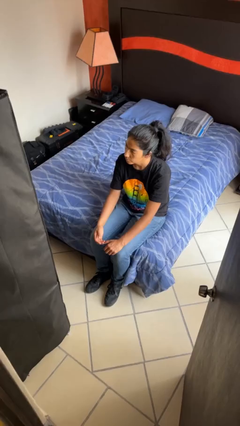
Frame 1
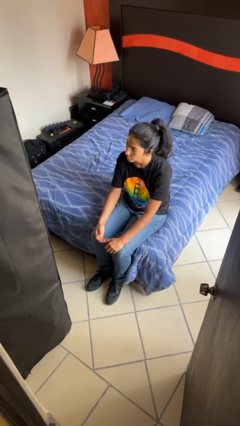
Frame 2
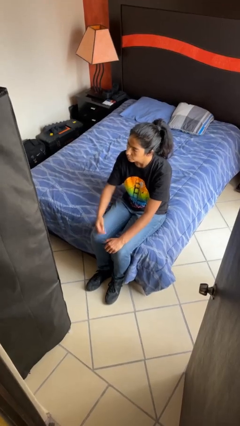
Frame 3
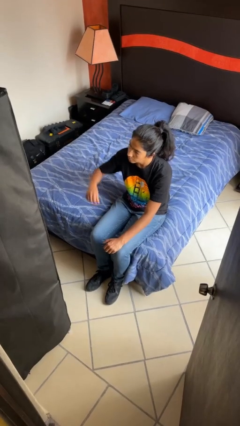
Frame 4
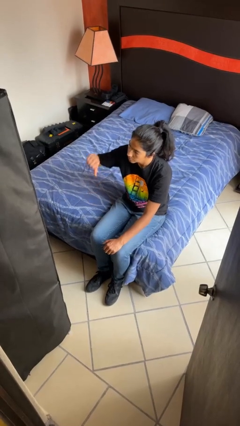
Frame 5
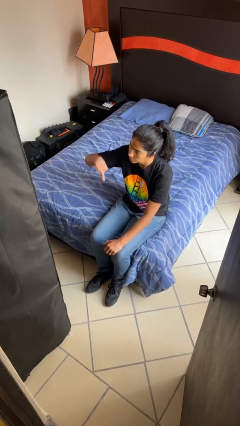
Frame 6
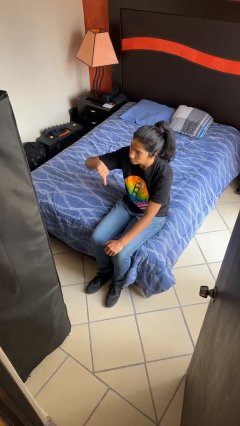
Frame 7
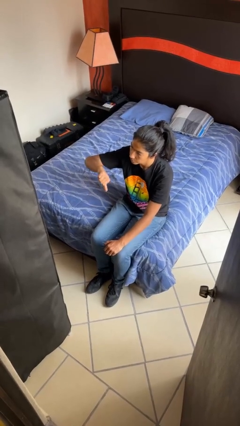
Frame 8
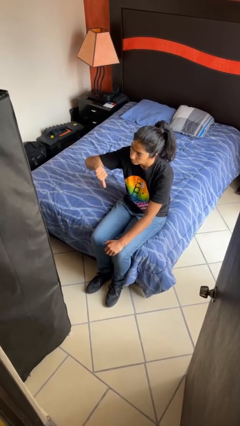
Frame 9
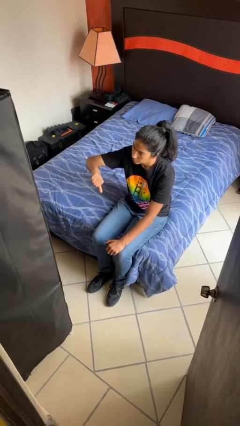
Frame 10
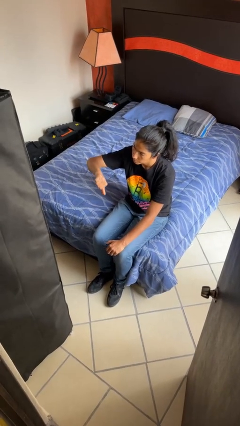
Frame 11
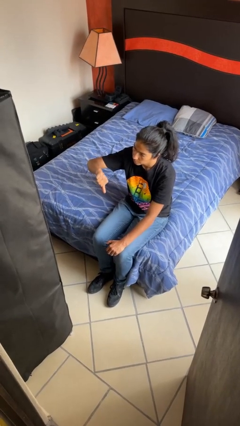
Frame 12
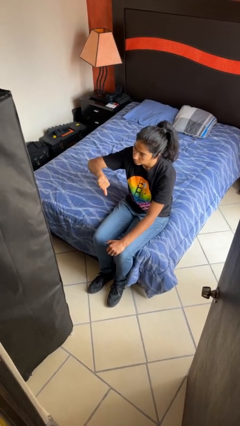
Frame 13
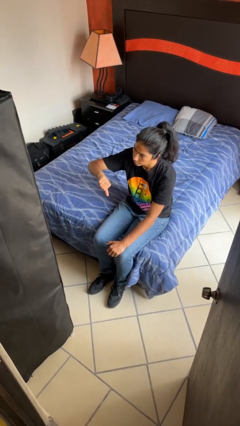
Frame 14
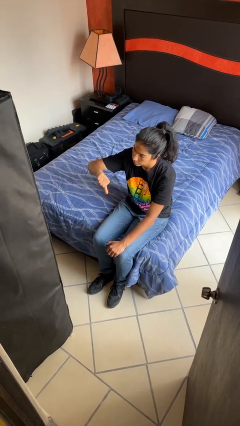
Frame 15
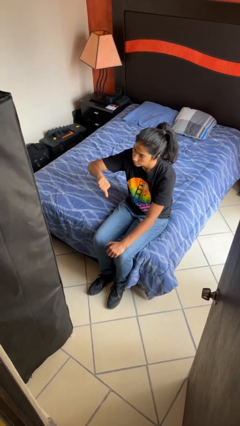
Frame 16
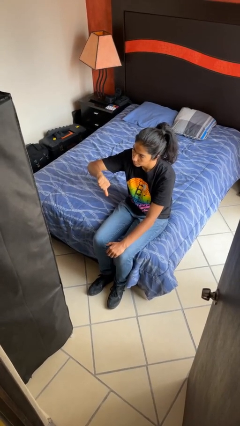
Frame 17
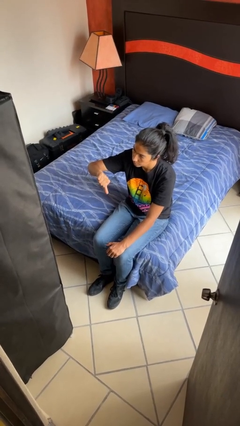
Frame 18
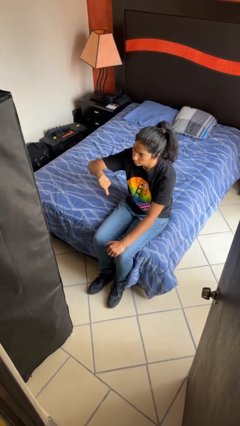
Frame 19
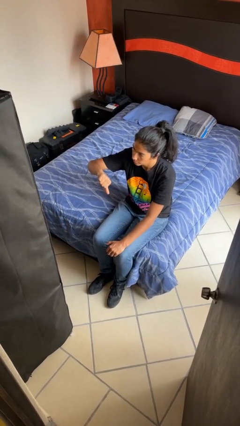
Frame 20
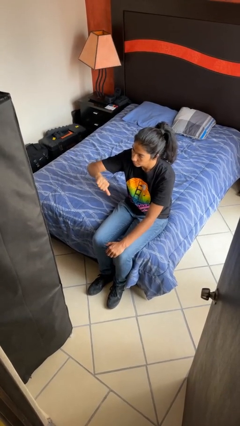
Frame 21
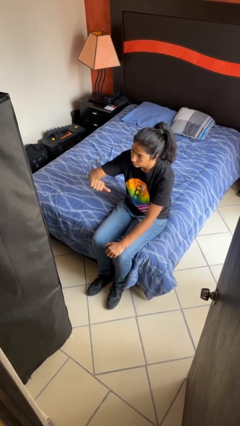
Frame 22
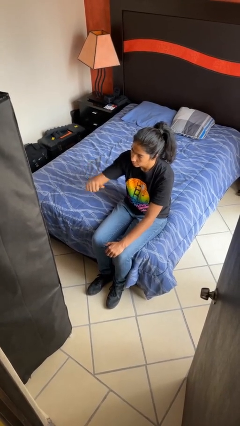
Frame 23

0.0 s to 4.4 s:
person gestures thumbs down

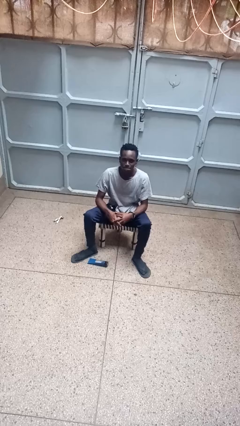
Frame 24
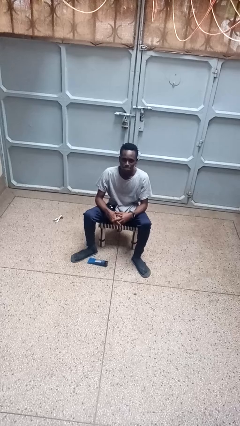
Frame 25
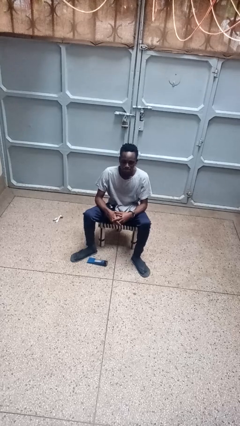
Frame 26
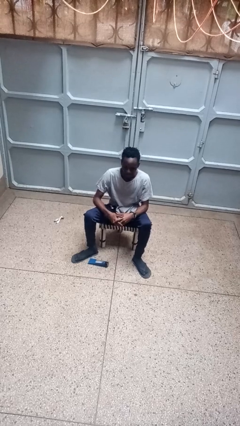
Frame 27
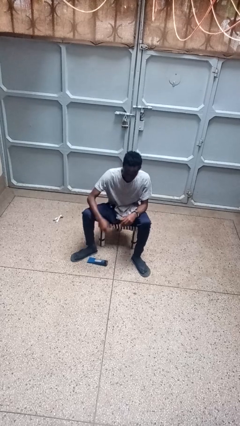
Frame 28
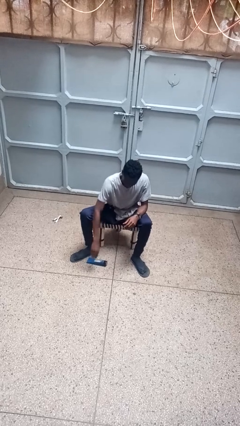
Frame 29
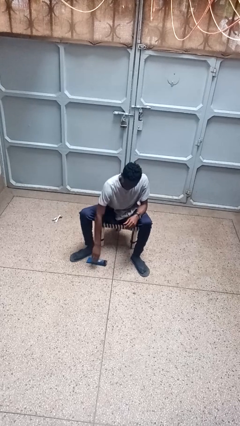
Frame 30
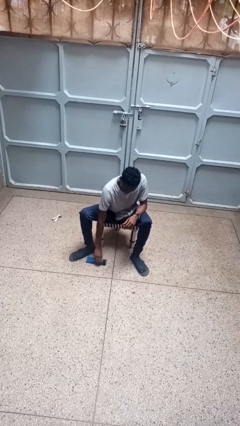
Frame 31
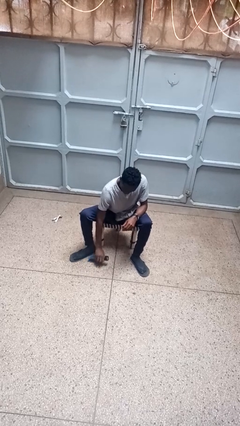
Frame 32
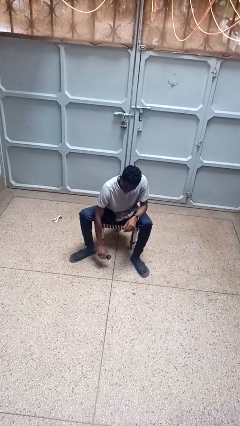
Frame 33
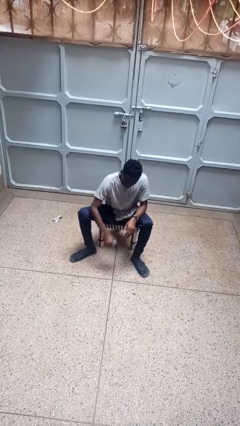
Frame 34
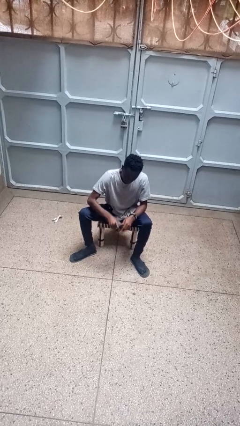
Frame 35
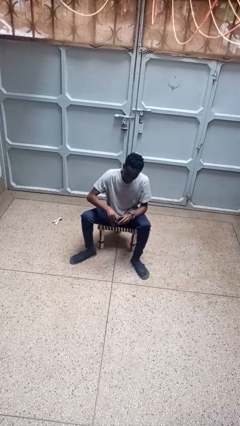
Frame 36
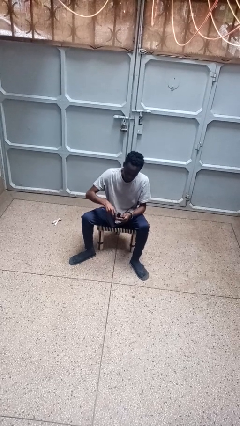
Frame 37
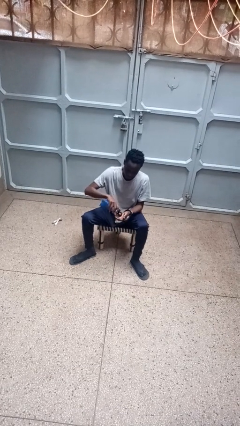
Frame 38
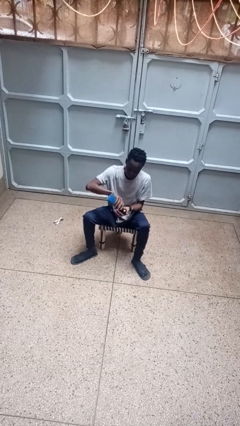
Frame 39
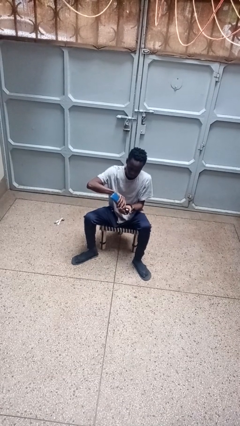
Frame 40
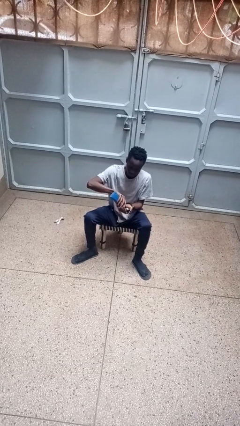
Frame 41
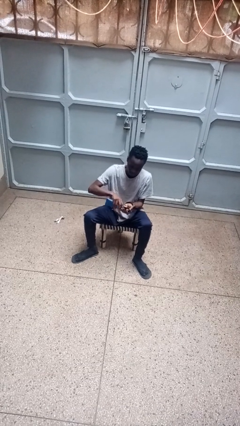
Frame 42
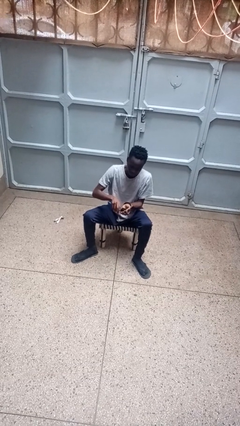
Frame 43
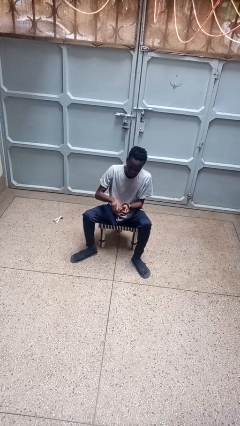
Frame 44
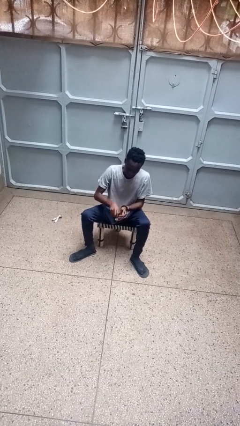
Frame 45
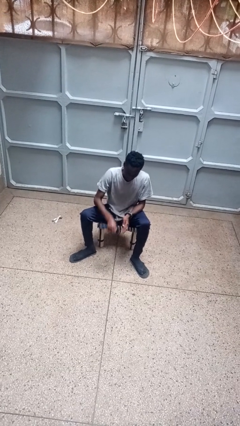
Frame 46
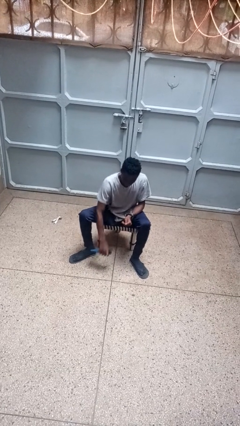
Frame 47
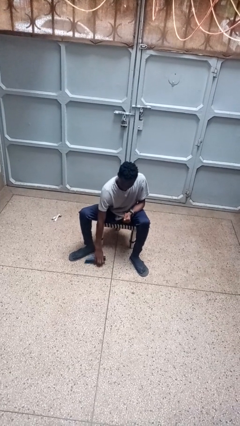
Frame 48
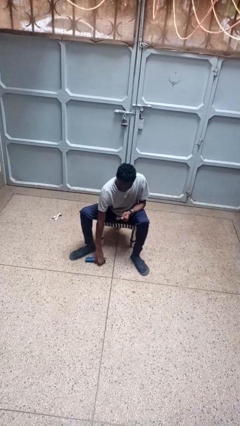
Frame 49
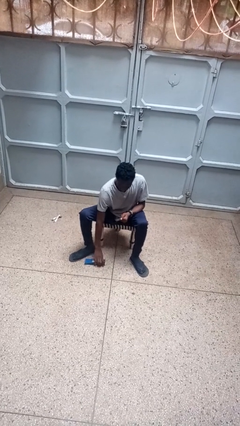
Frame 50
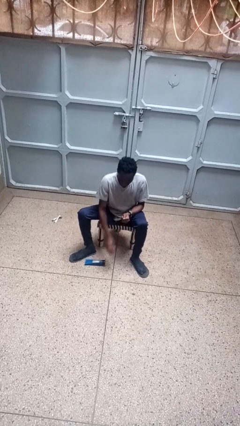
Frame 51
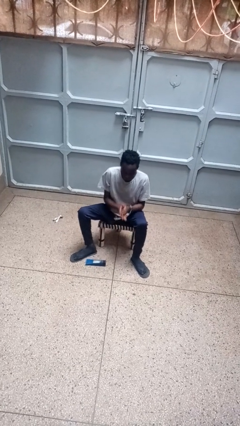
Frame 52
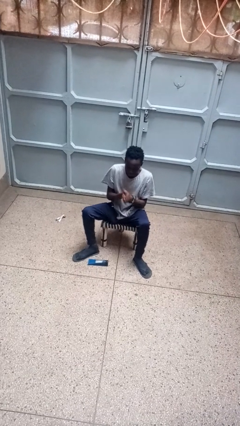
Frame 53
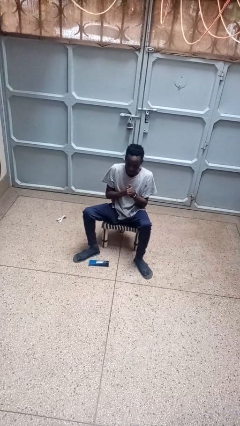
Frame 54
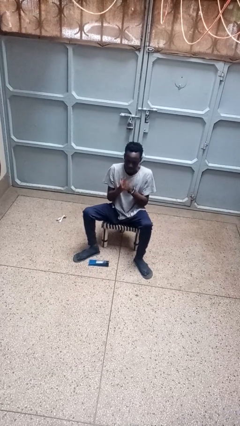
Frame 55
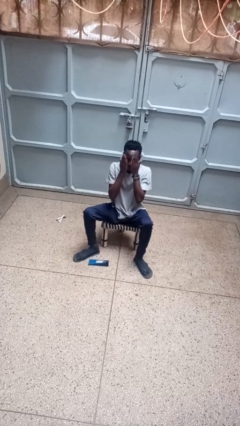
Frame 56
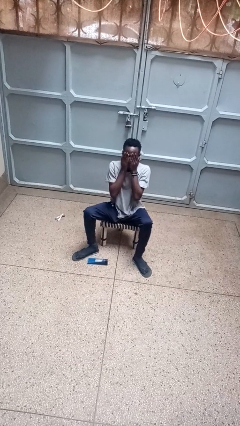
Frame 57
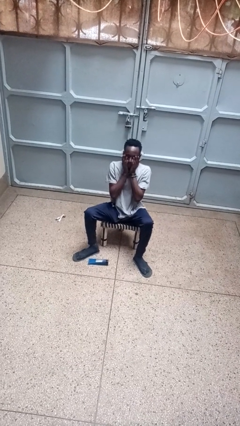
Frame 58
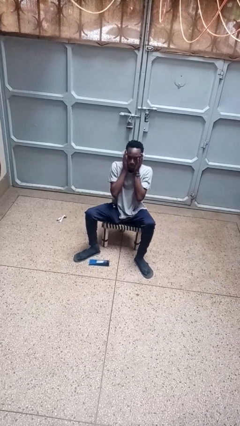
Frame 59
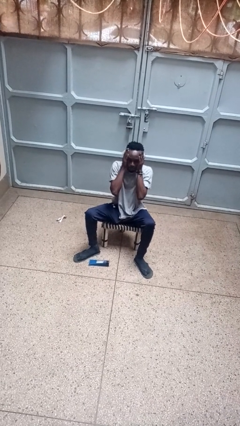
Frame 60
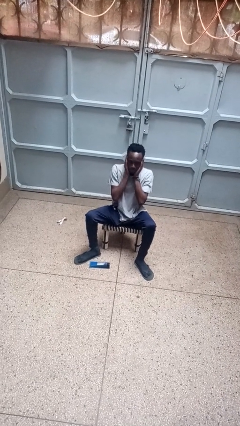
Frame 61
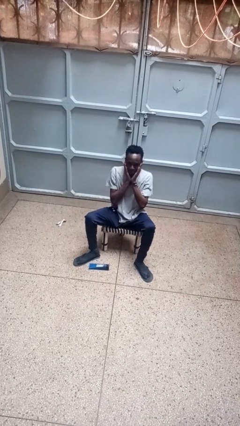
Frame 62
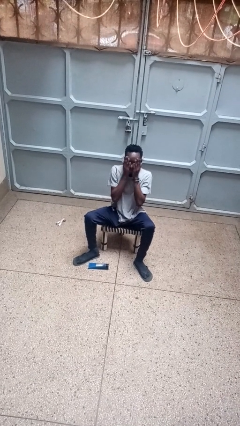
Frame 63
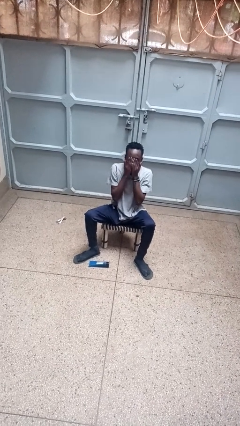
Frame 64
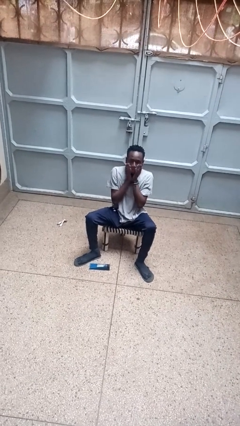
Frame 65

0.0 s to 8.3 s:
person applies facial moisturizer

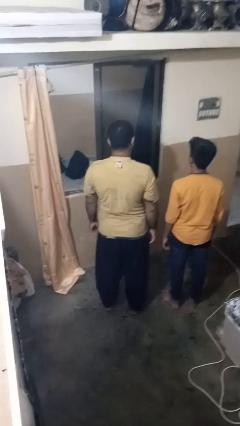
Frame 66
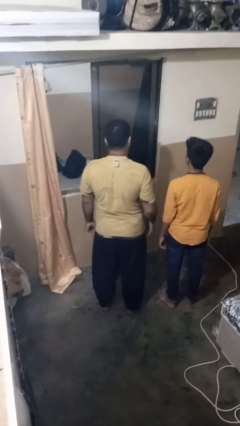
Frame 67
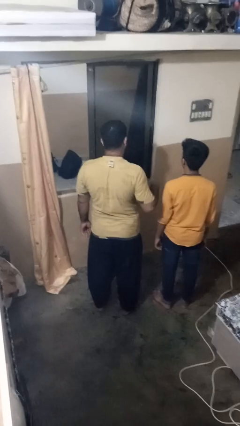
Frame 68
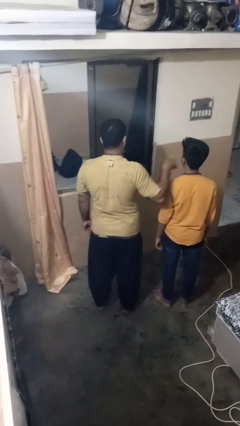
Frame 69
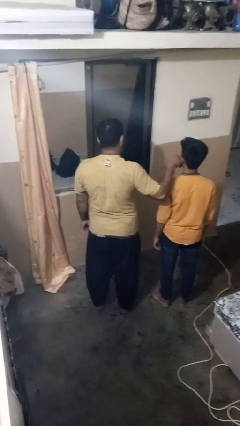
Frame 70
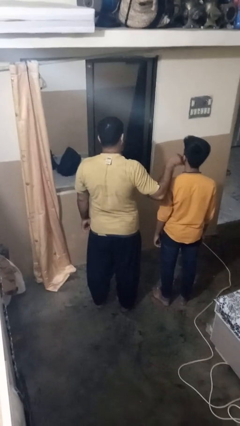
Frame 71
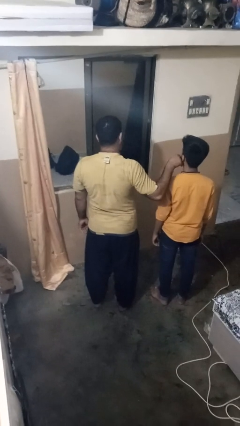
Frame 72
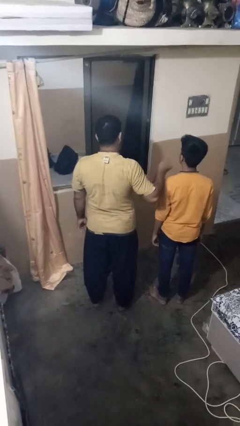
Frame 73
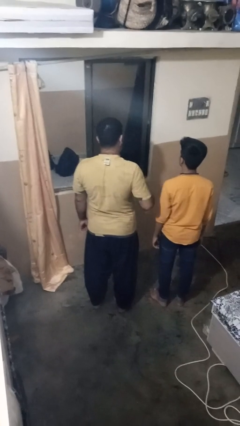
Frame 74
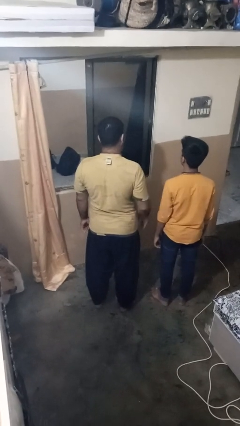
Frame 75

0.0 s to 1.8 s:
person touches face of person

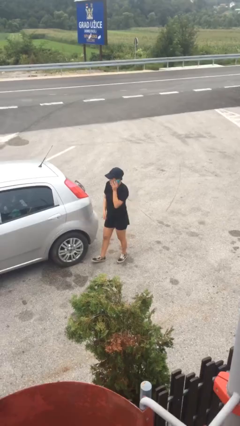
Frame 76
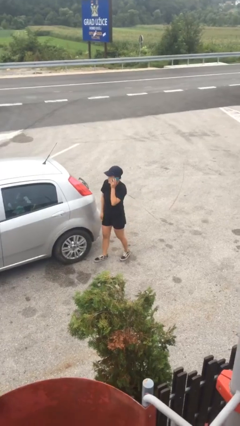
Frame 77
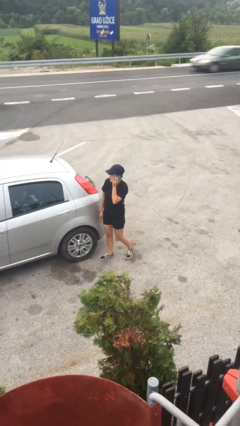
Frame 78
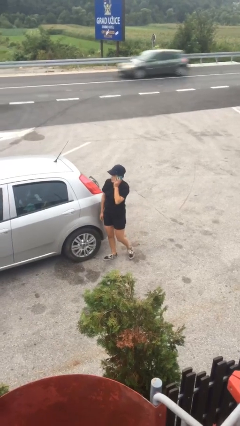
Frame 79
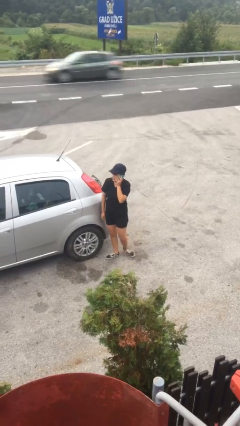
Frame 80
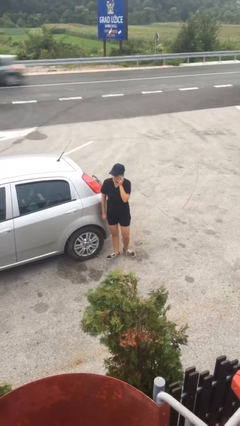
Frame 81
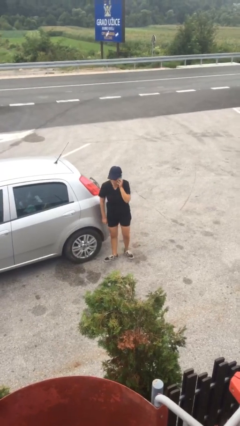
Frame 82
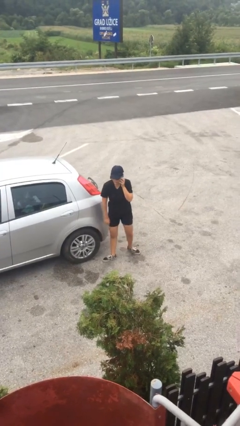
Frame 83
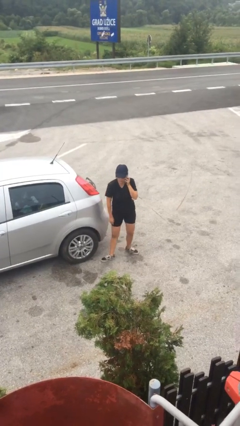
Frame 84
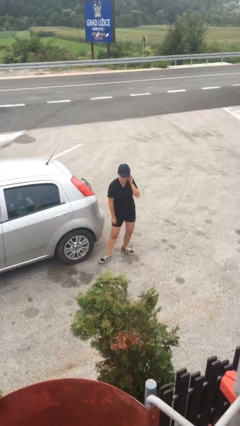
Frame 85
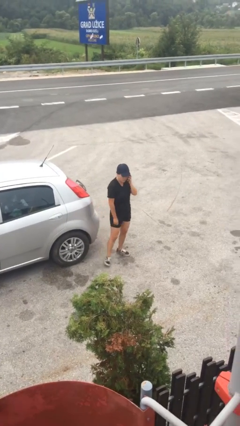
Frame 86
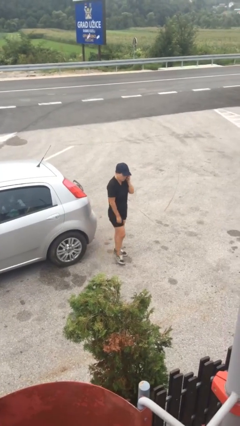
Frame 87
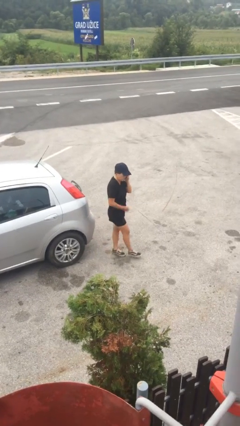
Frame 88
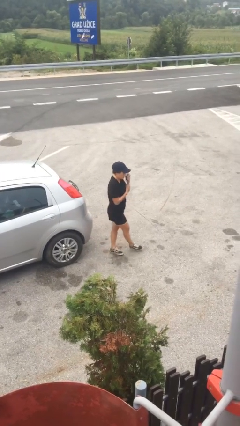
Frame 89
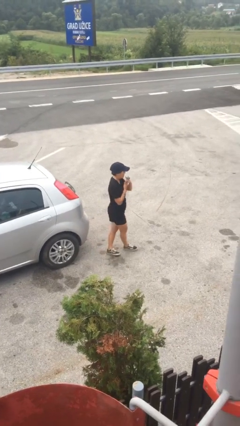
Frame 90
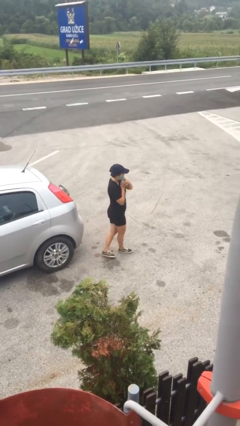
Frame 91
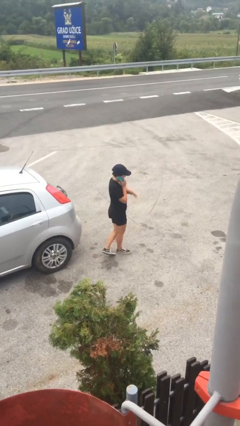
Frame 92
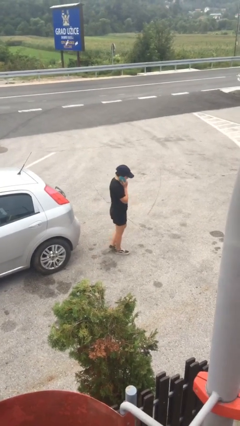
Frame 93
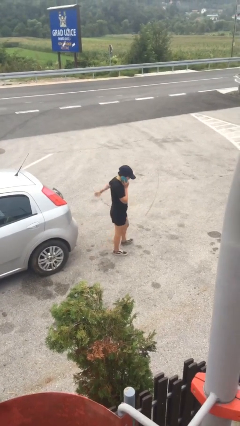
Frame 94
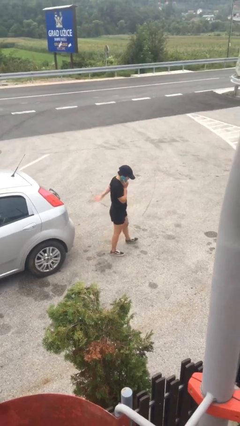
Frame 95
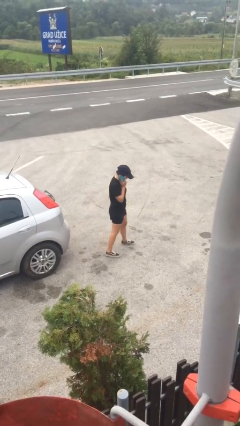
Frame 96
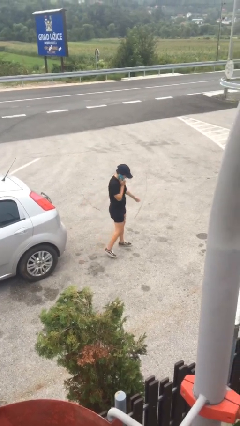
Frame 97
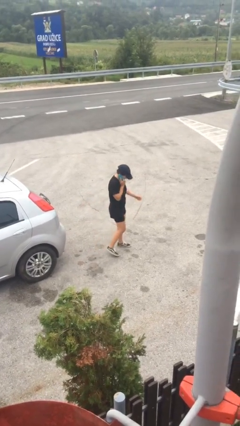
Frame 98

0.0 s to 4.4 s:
person talks on phone
